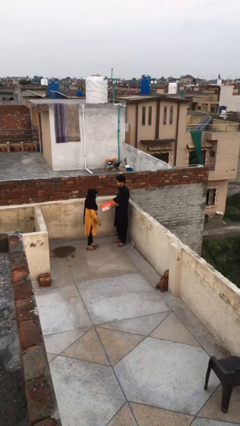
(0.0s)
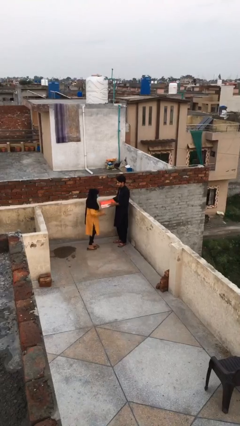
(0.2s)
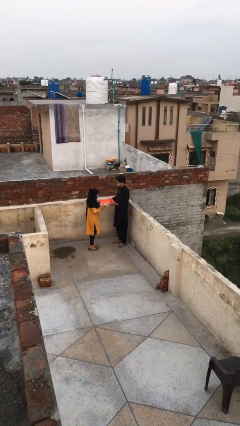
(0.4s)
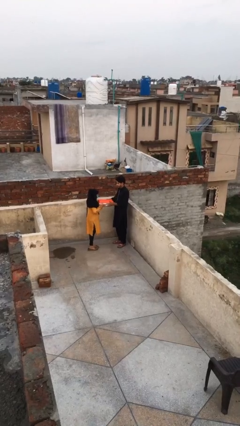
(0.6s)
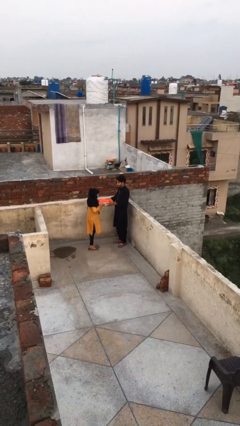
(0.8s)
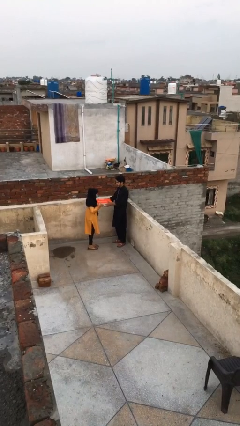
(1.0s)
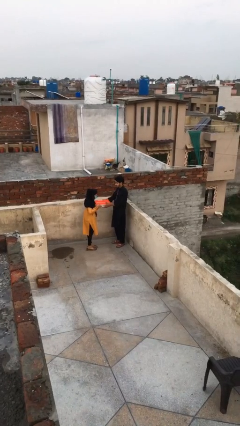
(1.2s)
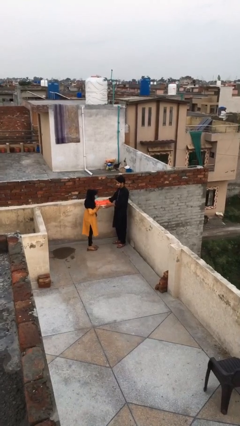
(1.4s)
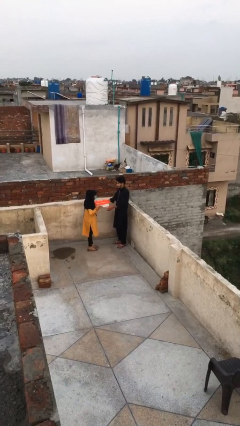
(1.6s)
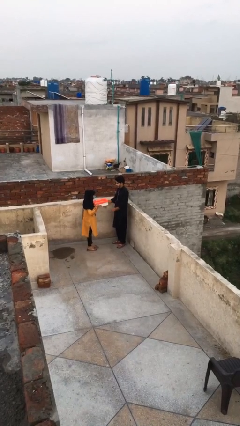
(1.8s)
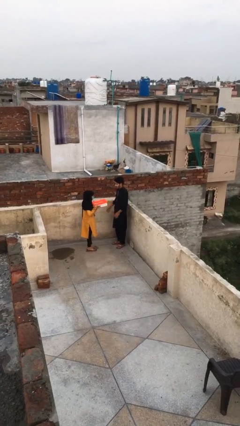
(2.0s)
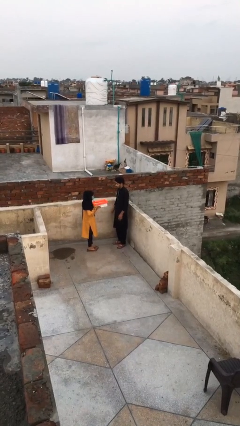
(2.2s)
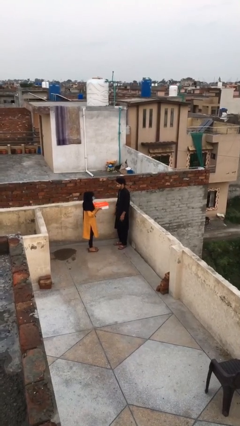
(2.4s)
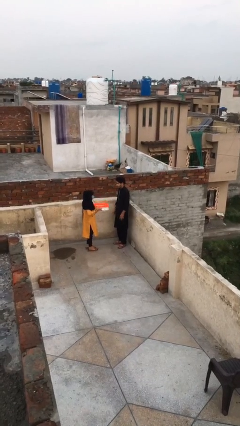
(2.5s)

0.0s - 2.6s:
person transfers object to person

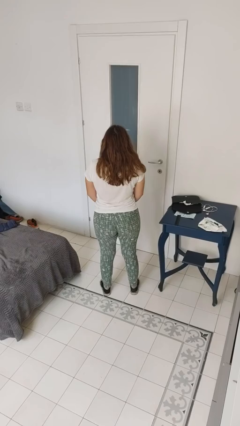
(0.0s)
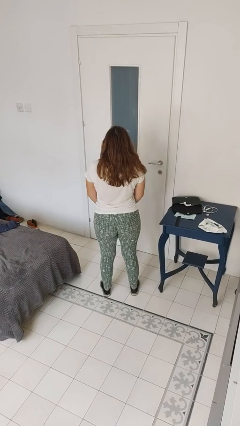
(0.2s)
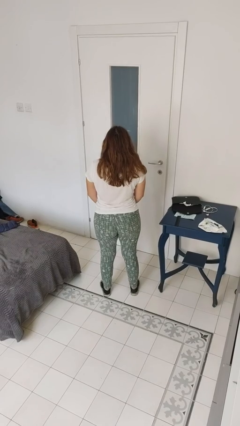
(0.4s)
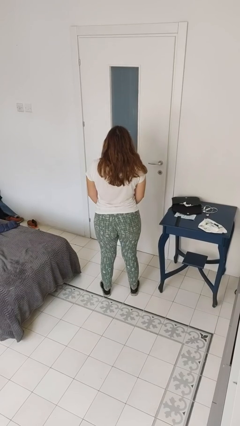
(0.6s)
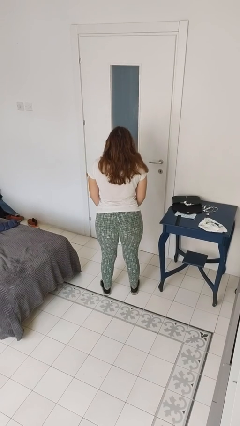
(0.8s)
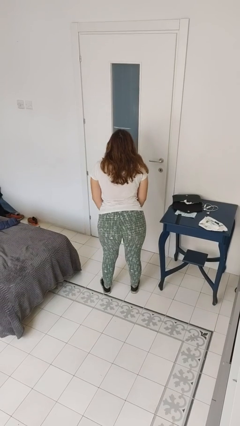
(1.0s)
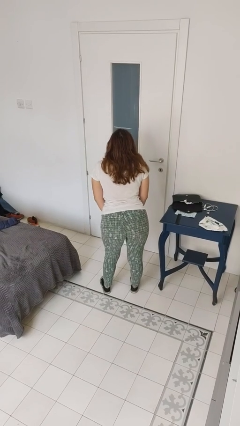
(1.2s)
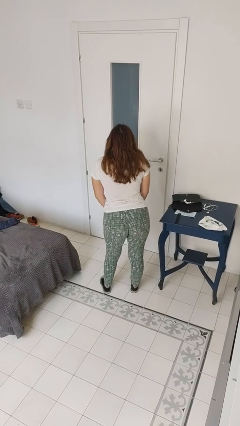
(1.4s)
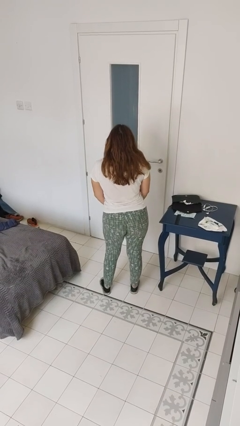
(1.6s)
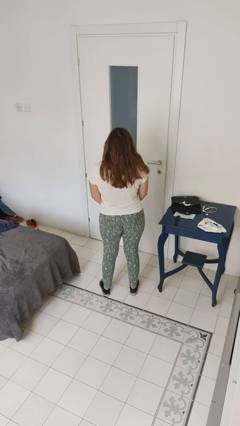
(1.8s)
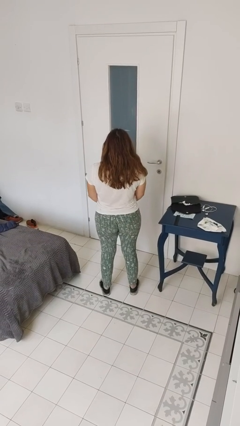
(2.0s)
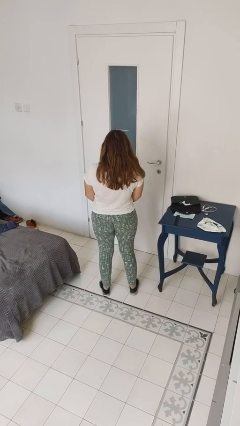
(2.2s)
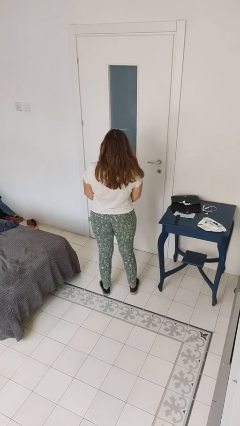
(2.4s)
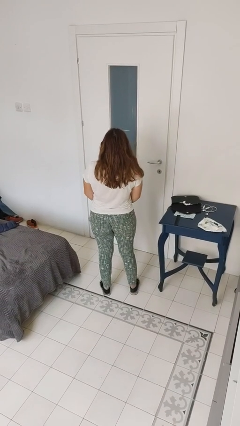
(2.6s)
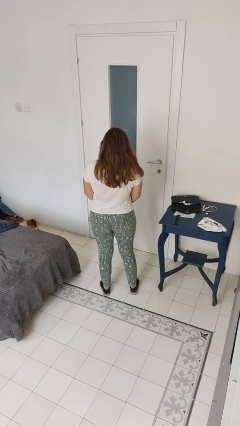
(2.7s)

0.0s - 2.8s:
person wiggles hips

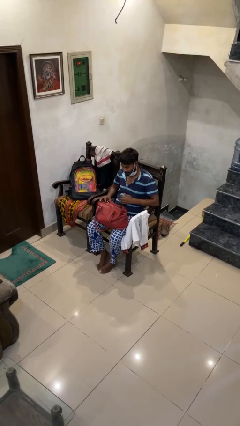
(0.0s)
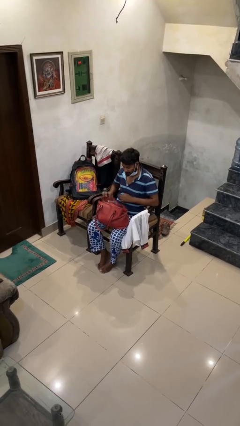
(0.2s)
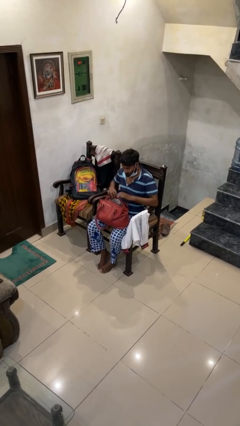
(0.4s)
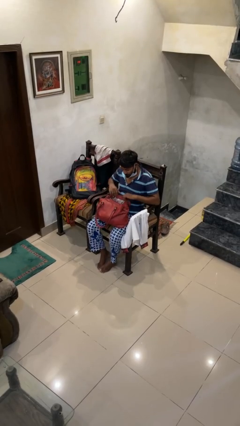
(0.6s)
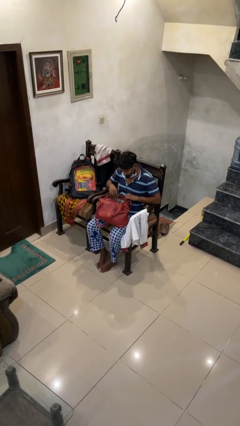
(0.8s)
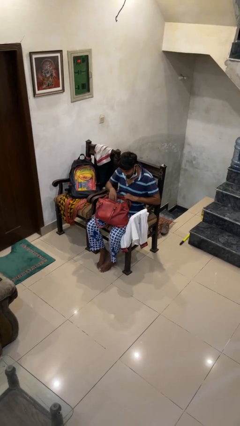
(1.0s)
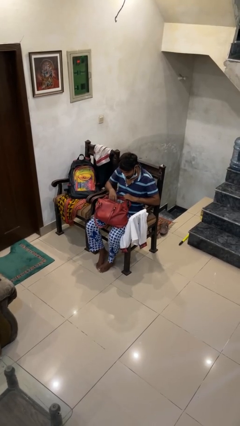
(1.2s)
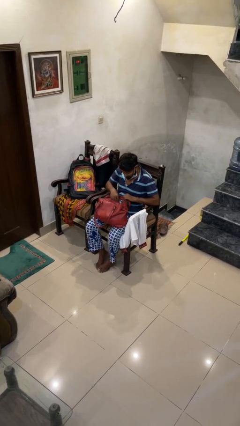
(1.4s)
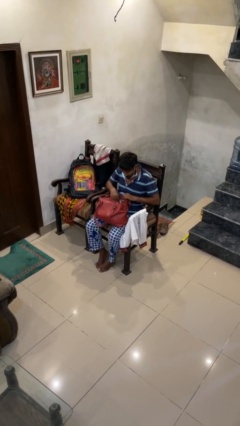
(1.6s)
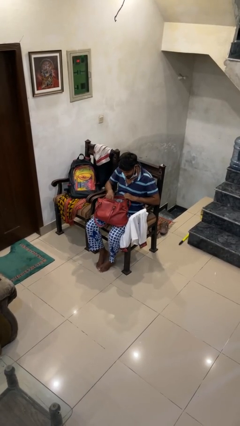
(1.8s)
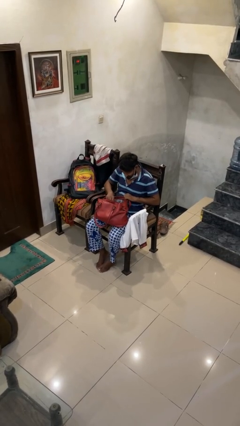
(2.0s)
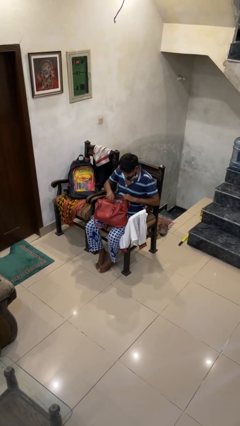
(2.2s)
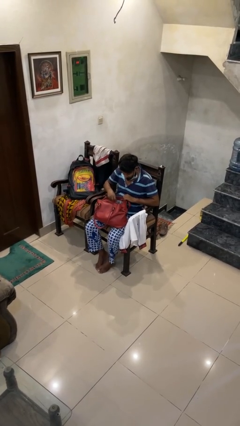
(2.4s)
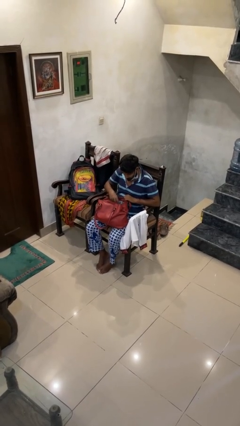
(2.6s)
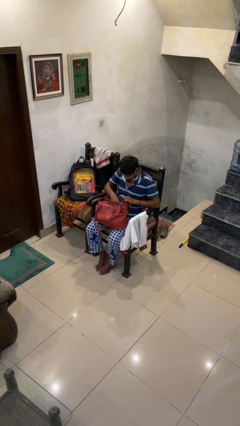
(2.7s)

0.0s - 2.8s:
person searches in purse

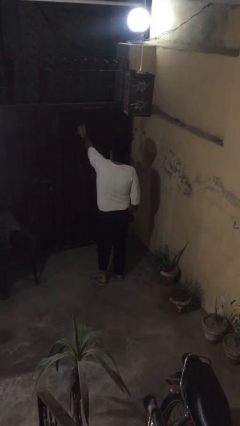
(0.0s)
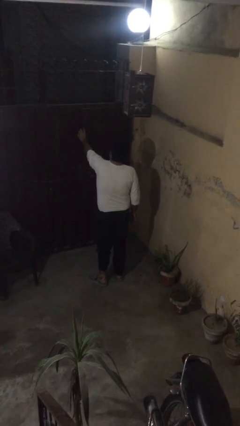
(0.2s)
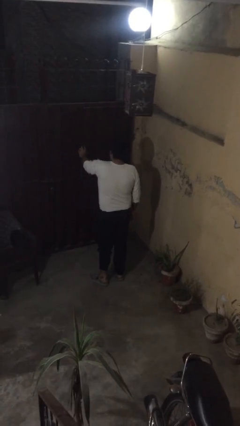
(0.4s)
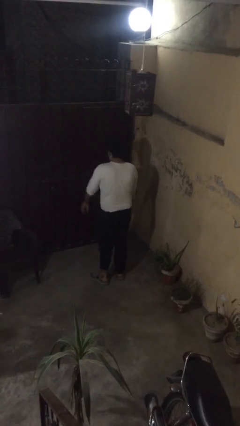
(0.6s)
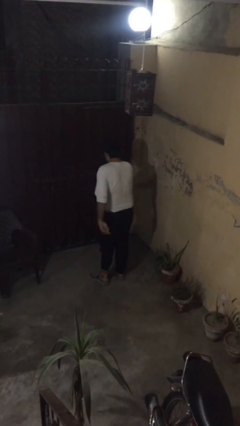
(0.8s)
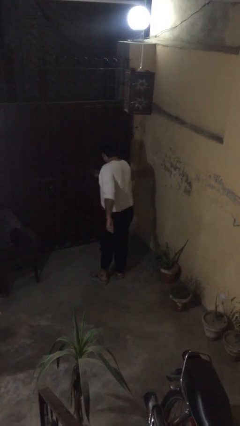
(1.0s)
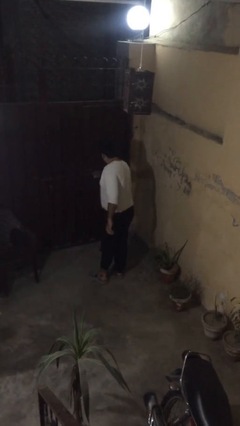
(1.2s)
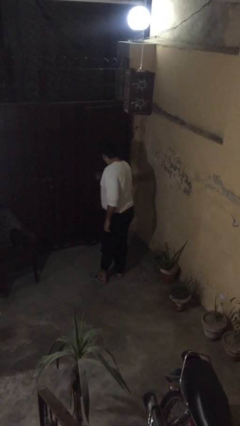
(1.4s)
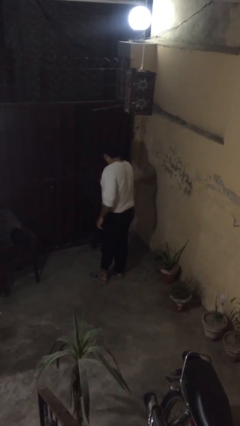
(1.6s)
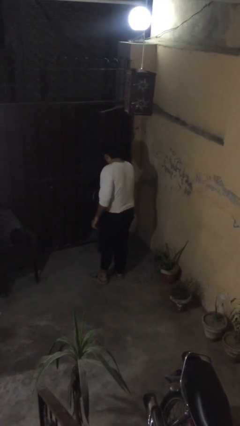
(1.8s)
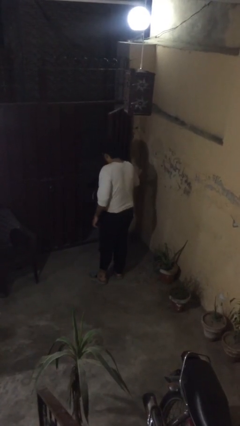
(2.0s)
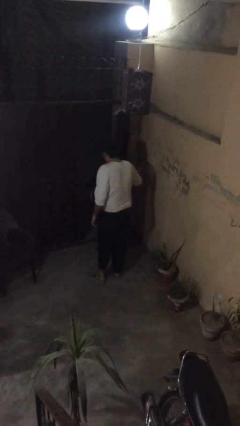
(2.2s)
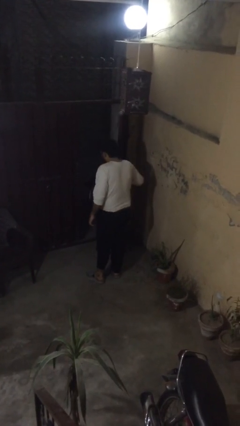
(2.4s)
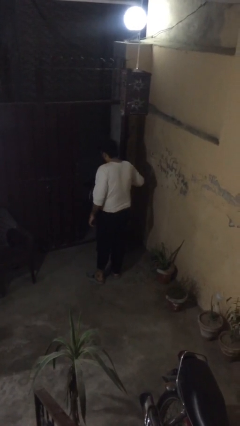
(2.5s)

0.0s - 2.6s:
person opens facility door

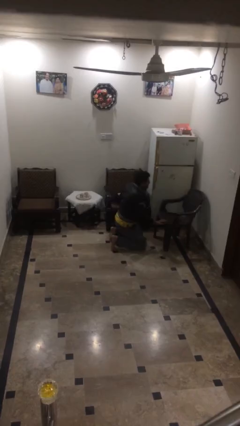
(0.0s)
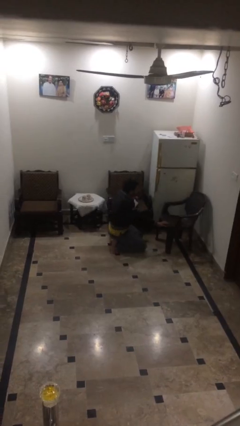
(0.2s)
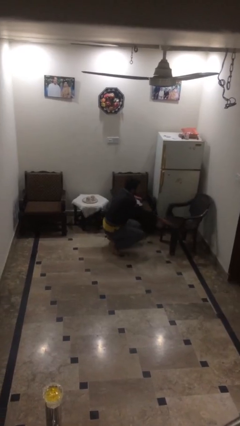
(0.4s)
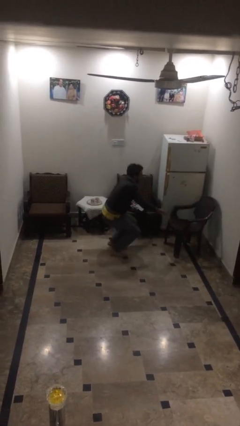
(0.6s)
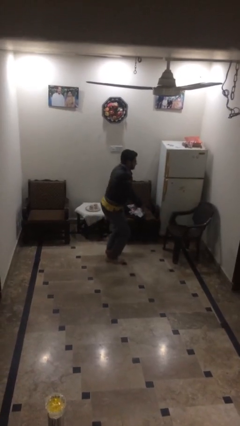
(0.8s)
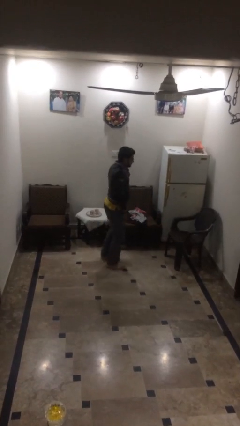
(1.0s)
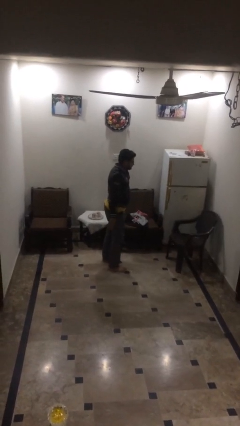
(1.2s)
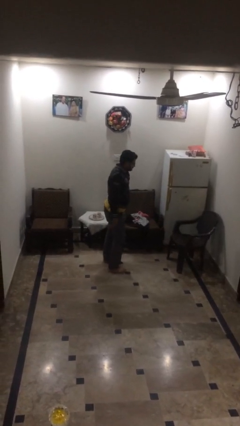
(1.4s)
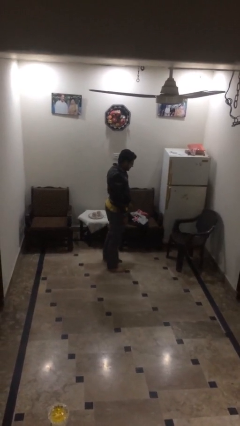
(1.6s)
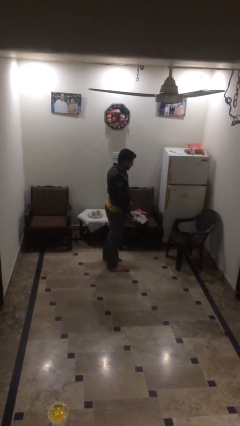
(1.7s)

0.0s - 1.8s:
person stands up

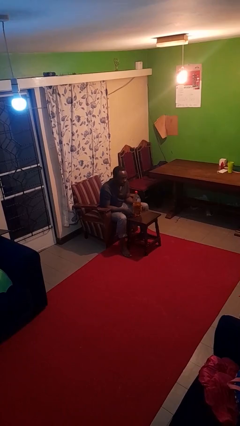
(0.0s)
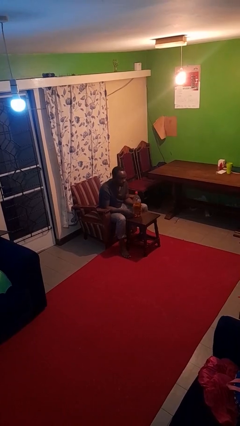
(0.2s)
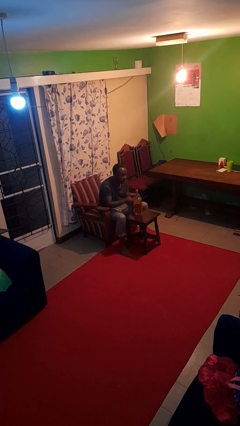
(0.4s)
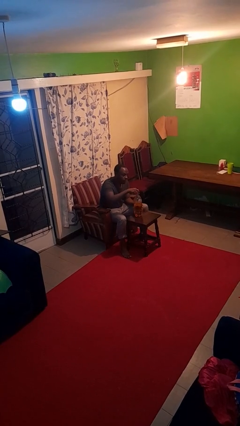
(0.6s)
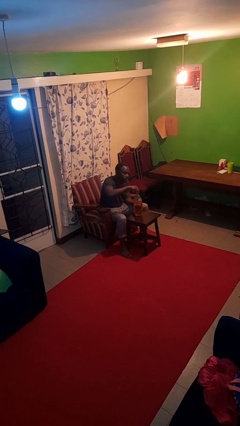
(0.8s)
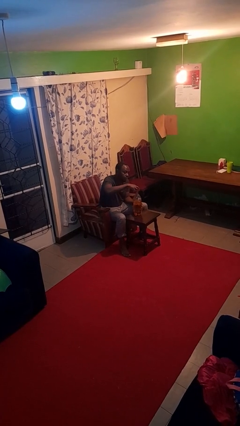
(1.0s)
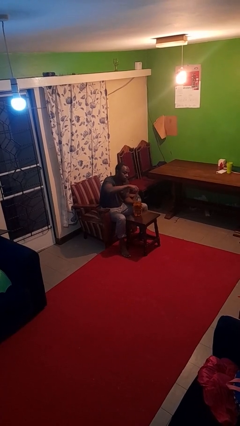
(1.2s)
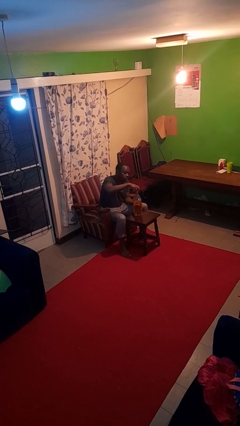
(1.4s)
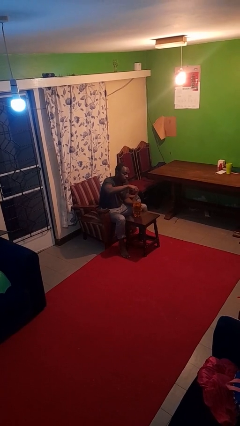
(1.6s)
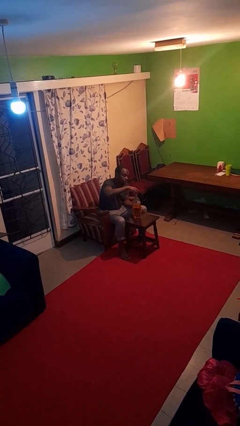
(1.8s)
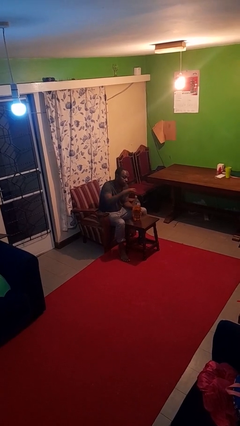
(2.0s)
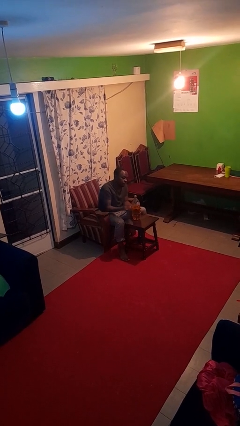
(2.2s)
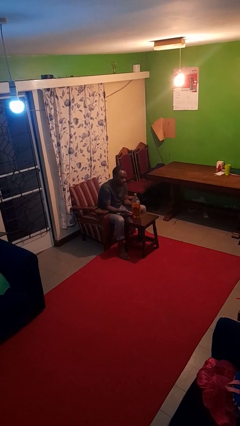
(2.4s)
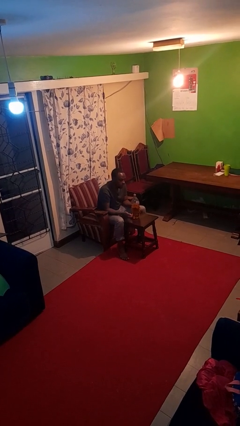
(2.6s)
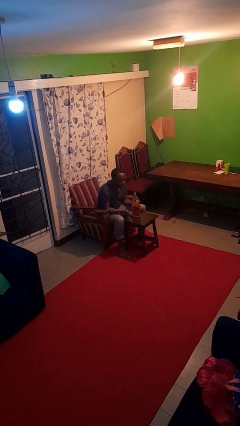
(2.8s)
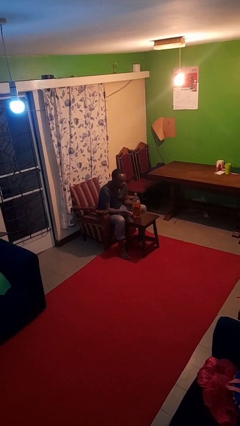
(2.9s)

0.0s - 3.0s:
person unscrews lid from bottle

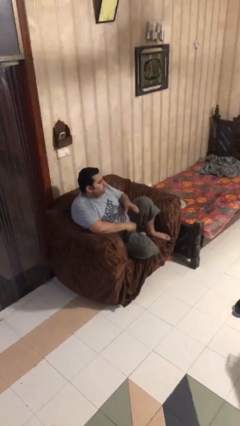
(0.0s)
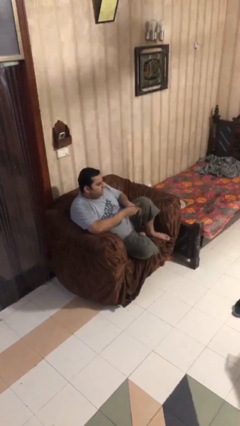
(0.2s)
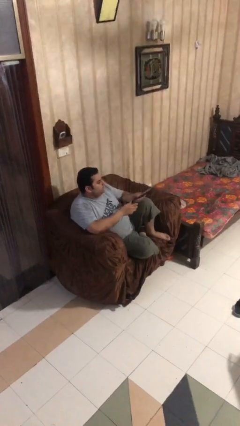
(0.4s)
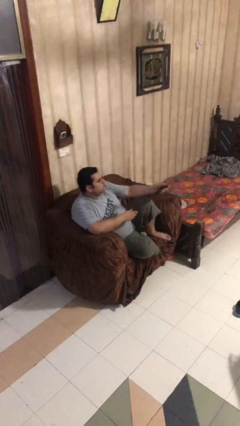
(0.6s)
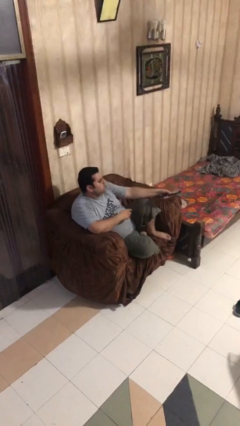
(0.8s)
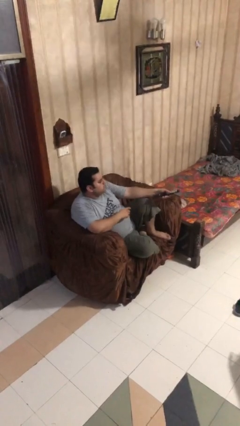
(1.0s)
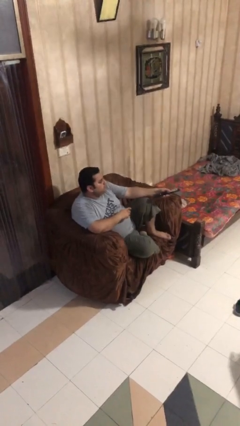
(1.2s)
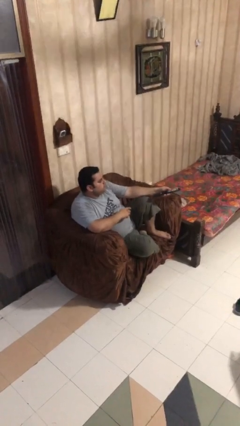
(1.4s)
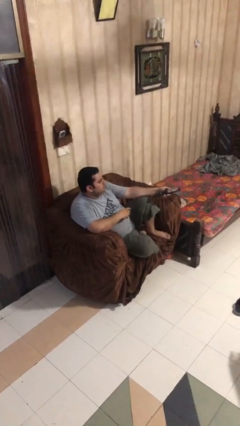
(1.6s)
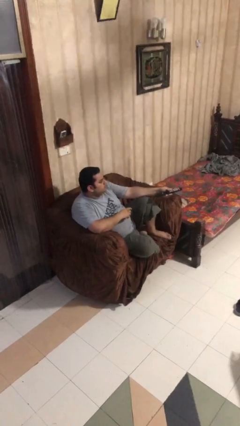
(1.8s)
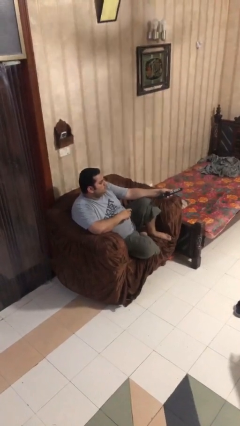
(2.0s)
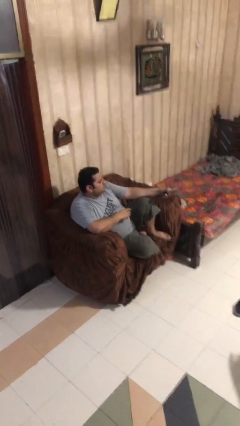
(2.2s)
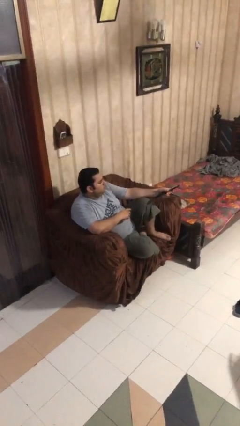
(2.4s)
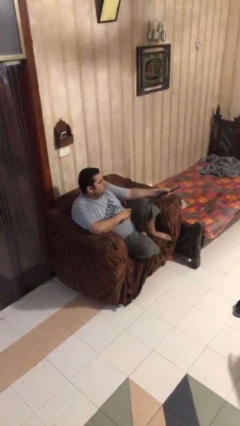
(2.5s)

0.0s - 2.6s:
person uses television remote
